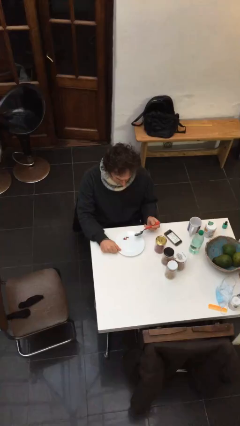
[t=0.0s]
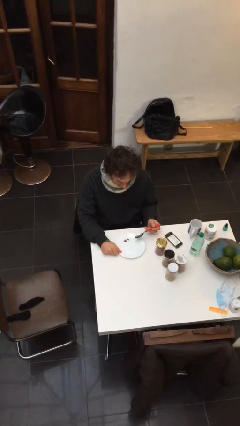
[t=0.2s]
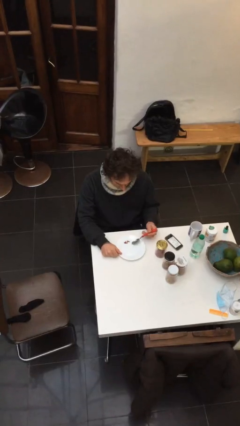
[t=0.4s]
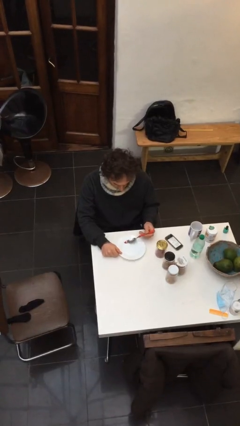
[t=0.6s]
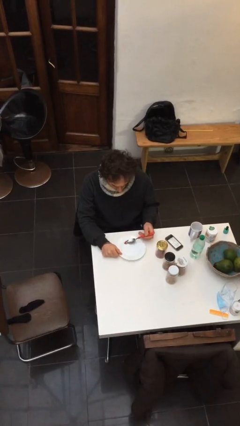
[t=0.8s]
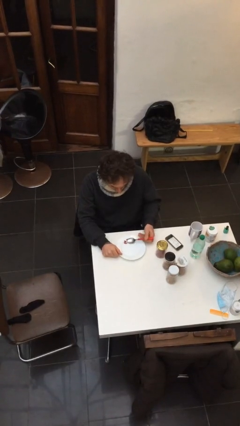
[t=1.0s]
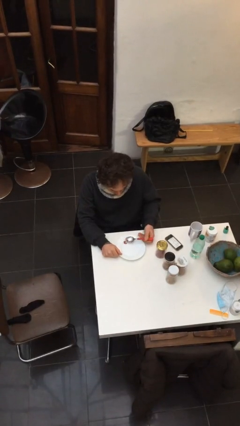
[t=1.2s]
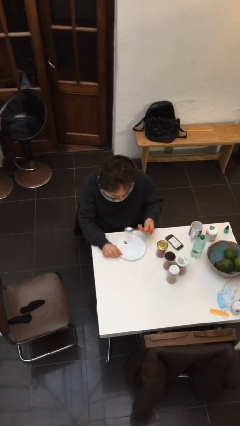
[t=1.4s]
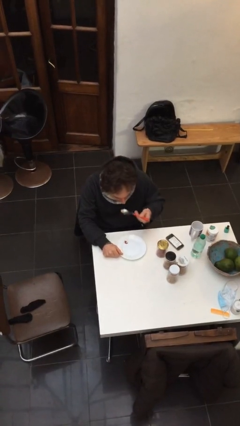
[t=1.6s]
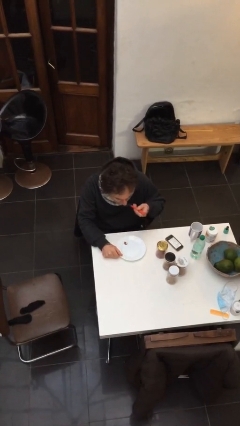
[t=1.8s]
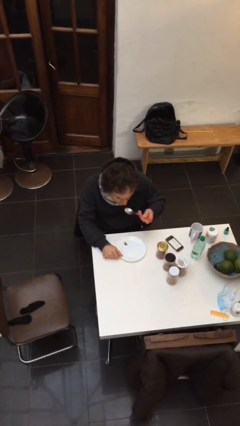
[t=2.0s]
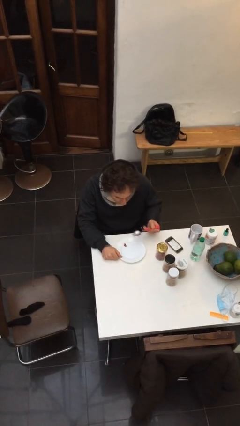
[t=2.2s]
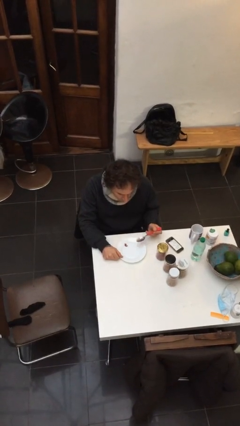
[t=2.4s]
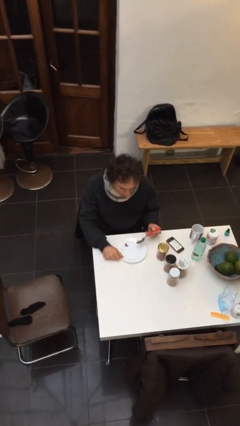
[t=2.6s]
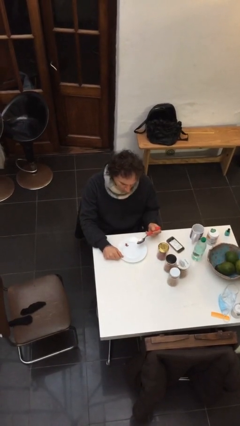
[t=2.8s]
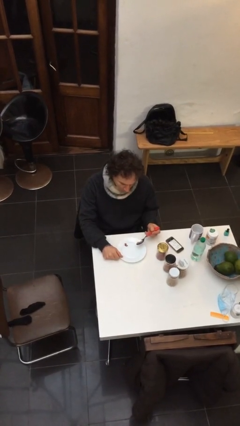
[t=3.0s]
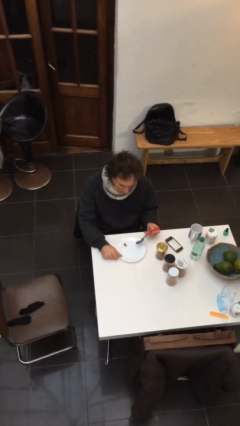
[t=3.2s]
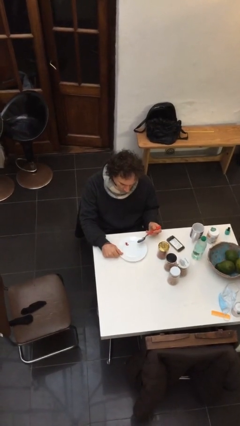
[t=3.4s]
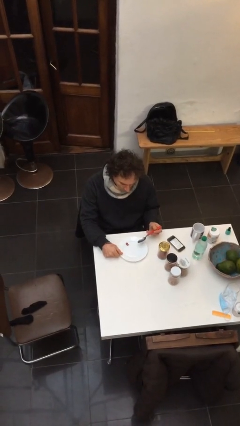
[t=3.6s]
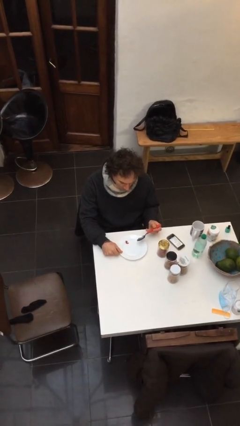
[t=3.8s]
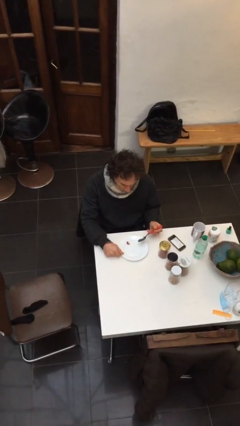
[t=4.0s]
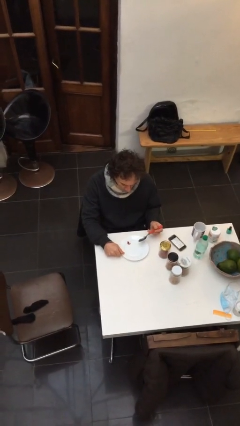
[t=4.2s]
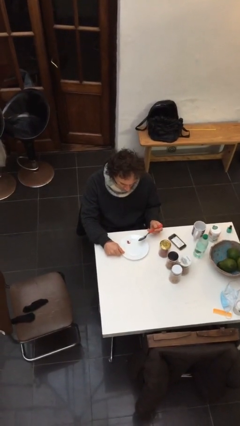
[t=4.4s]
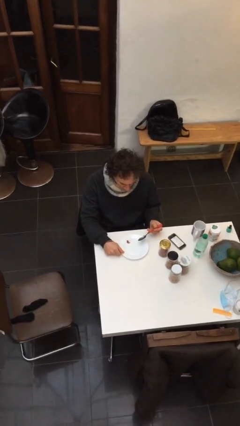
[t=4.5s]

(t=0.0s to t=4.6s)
person eats with utensil

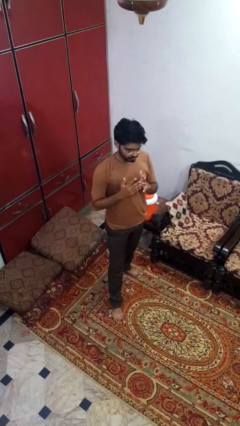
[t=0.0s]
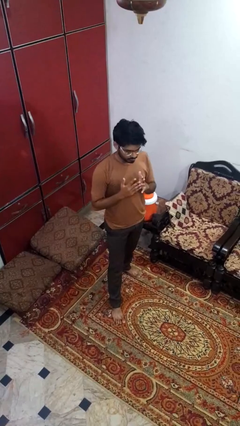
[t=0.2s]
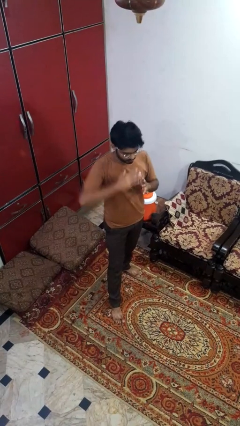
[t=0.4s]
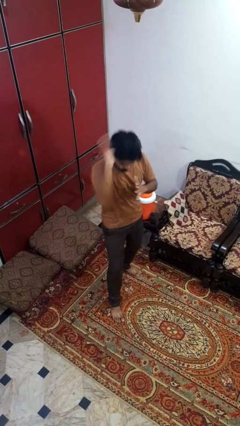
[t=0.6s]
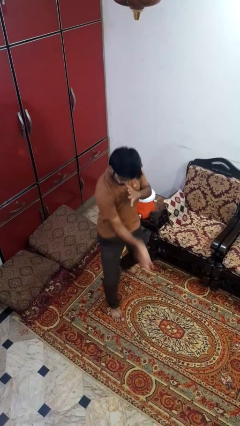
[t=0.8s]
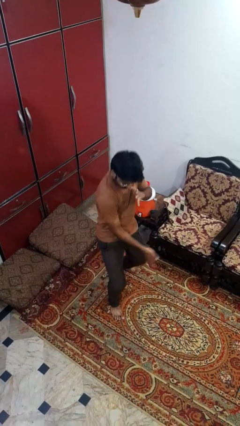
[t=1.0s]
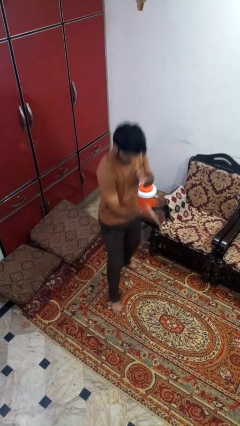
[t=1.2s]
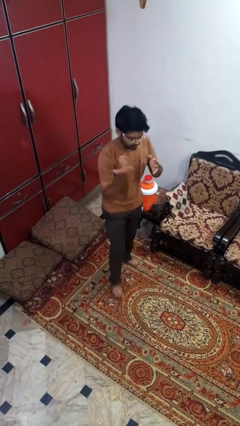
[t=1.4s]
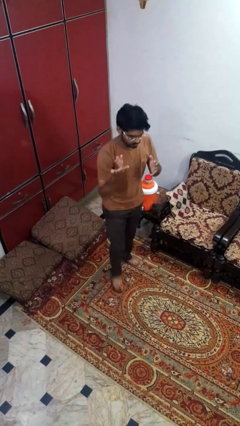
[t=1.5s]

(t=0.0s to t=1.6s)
person karate chop

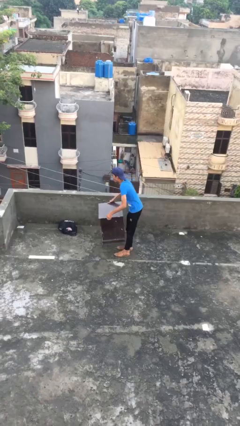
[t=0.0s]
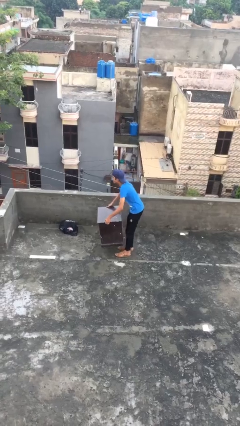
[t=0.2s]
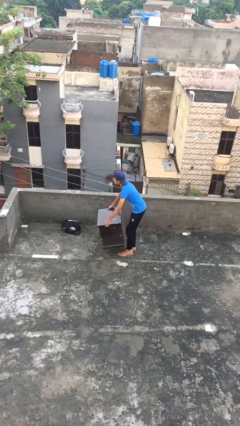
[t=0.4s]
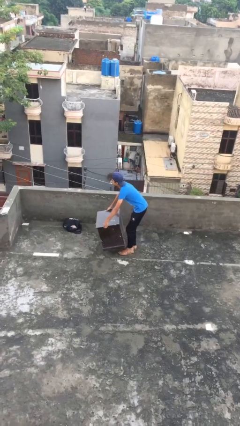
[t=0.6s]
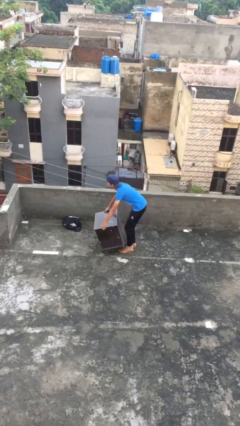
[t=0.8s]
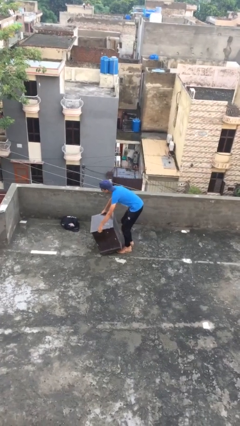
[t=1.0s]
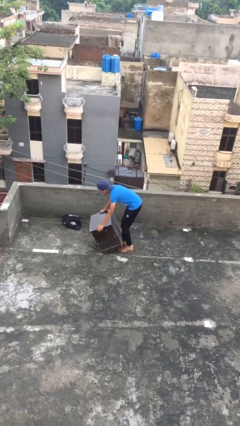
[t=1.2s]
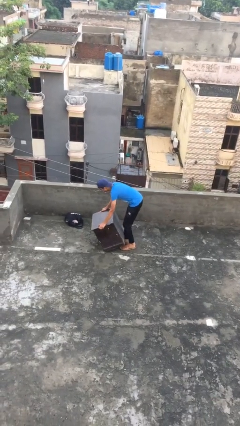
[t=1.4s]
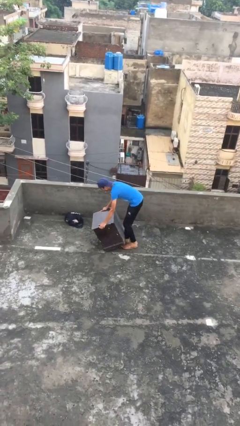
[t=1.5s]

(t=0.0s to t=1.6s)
person puts down object on floor

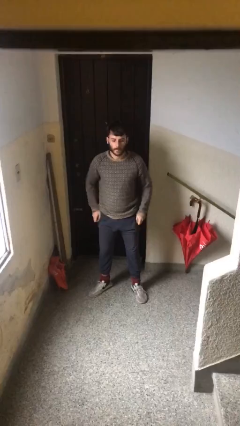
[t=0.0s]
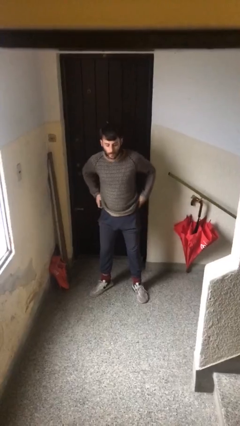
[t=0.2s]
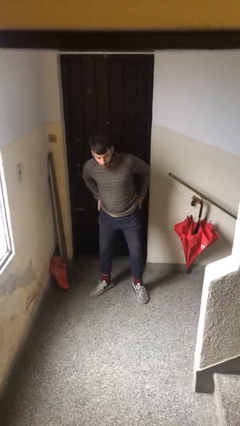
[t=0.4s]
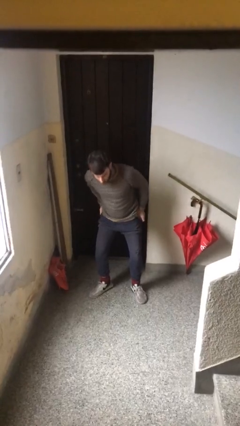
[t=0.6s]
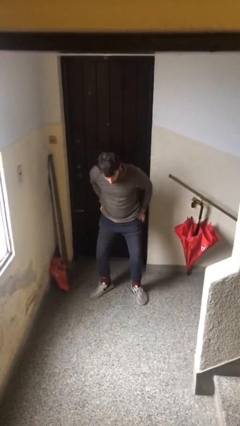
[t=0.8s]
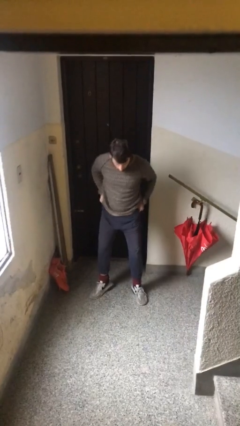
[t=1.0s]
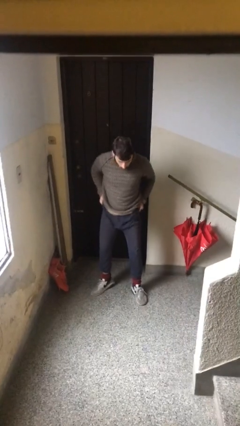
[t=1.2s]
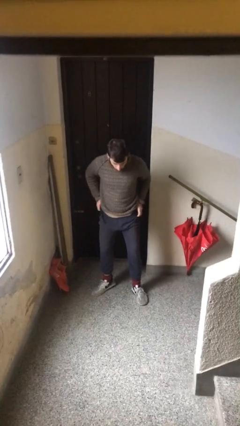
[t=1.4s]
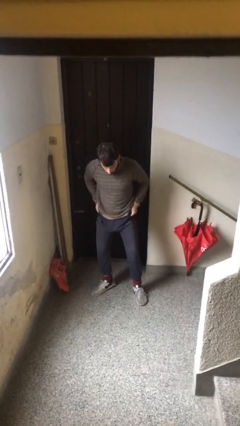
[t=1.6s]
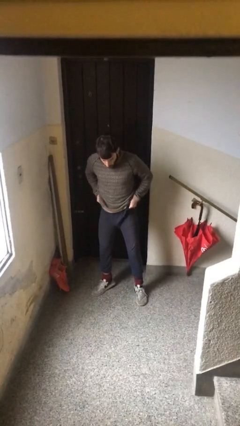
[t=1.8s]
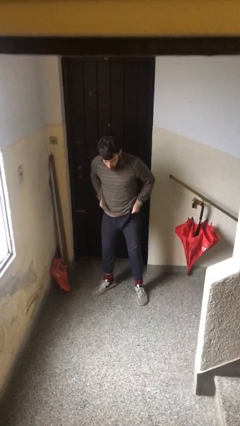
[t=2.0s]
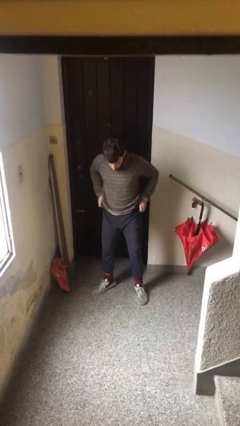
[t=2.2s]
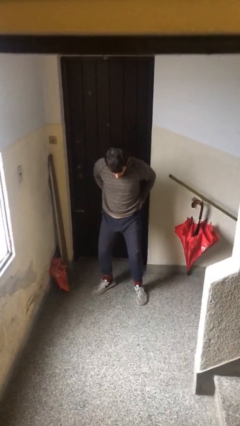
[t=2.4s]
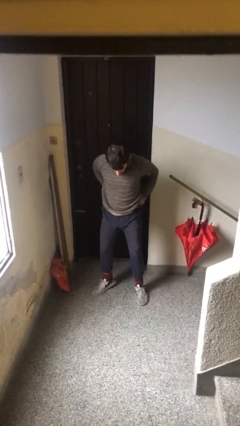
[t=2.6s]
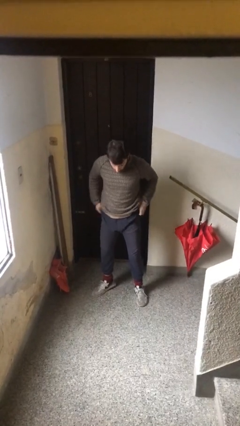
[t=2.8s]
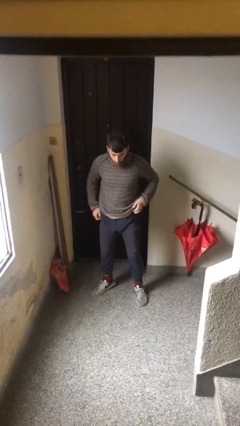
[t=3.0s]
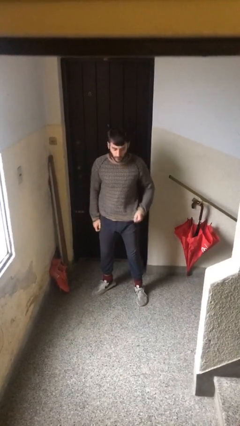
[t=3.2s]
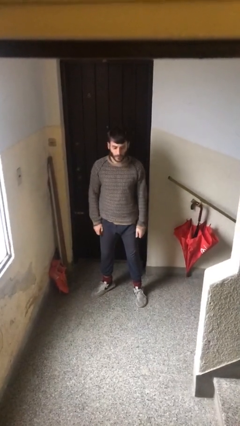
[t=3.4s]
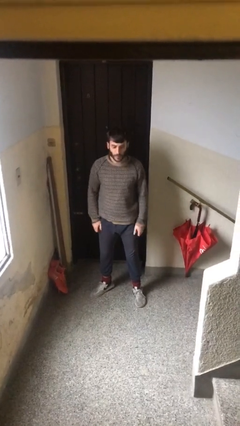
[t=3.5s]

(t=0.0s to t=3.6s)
person hikes up pants

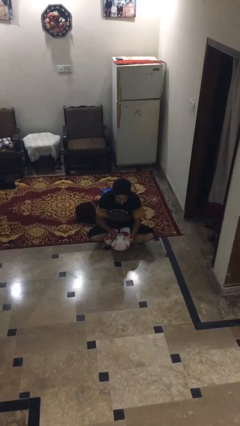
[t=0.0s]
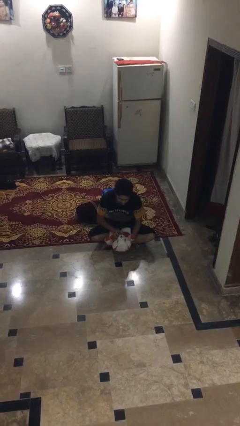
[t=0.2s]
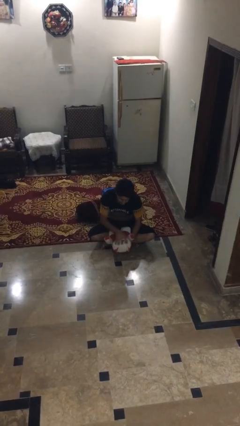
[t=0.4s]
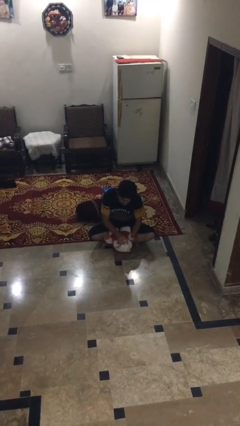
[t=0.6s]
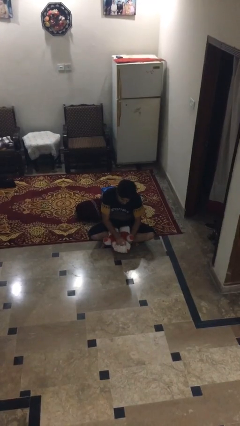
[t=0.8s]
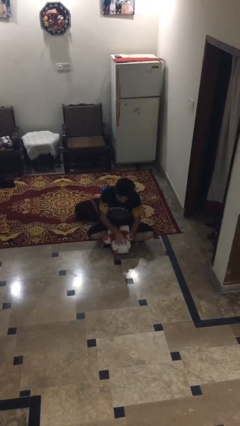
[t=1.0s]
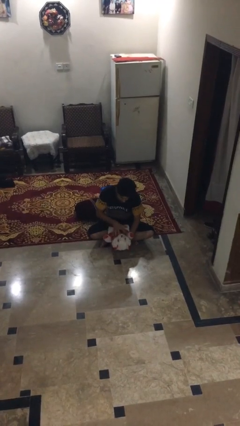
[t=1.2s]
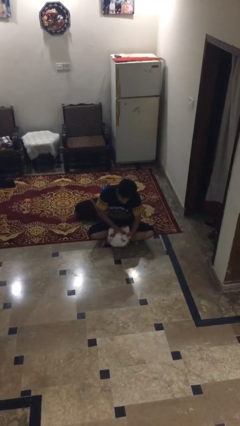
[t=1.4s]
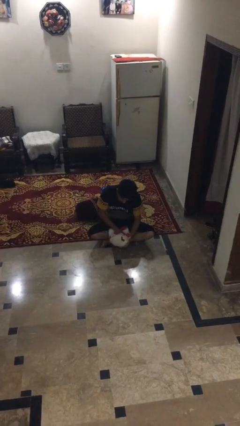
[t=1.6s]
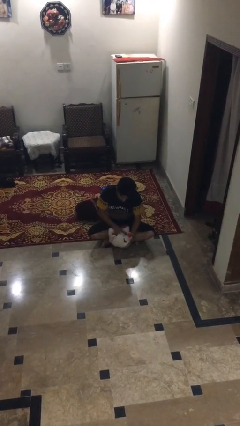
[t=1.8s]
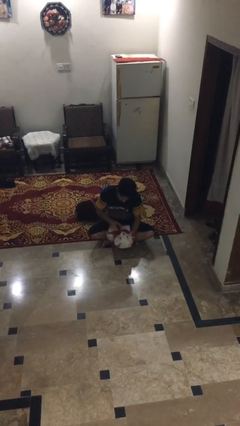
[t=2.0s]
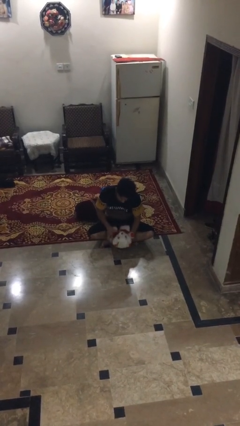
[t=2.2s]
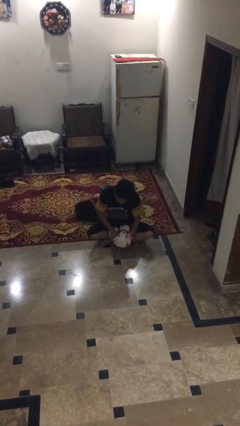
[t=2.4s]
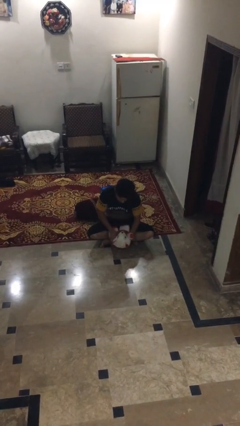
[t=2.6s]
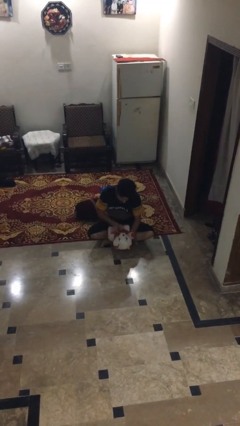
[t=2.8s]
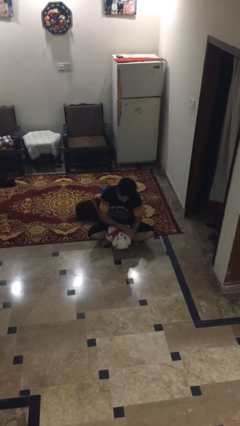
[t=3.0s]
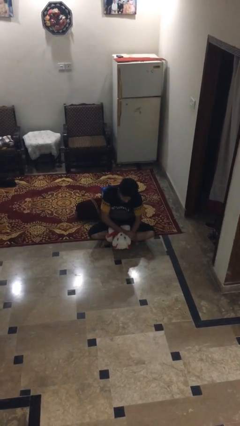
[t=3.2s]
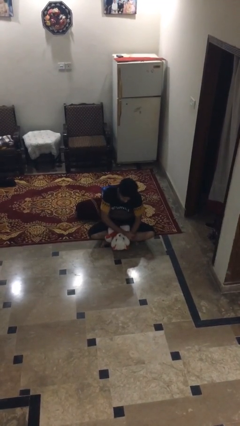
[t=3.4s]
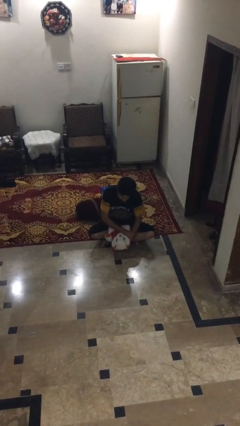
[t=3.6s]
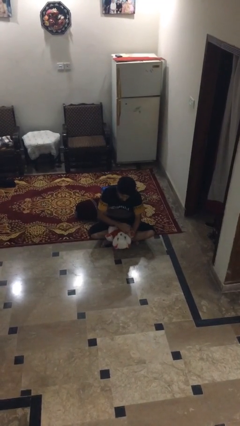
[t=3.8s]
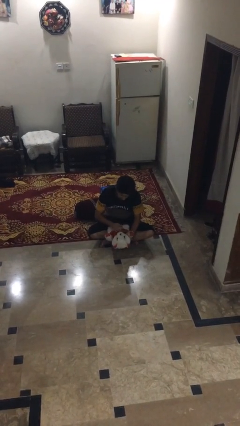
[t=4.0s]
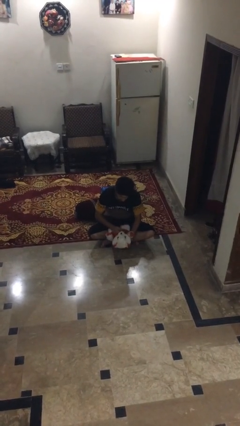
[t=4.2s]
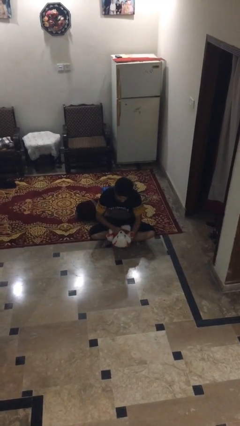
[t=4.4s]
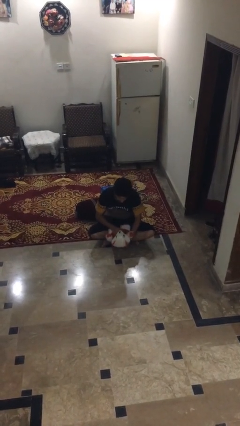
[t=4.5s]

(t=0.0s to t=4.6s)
person squeezes object

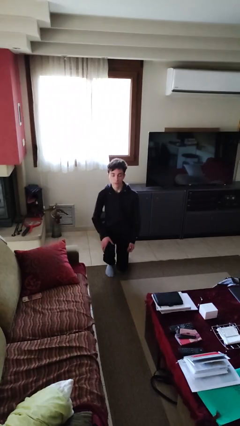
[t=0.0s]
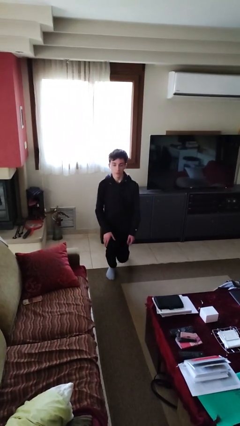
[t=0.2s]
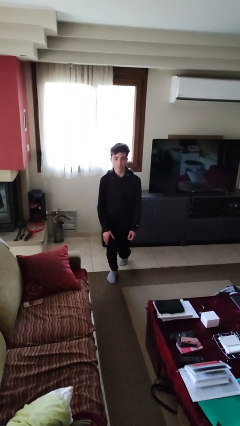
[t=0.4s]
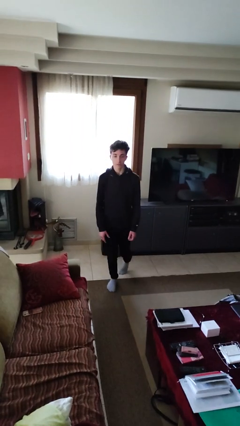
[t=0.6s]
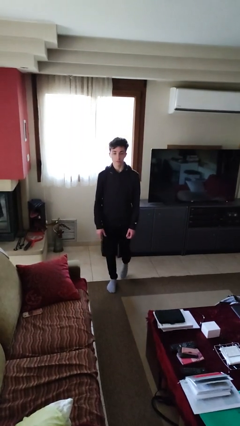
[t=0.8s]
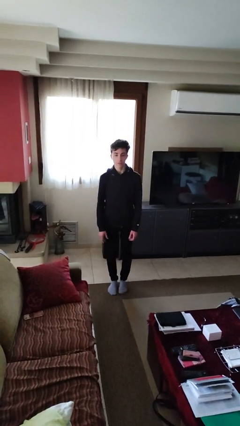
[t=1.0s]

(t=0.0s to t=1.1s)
person stands up from floor

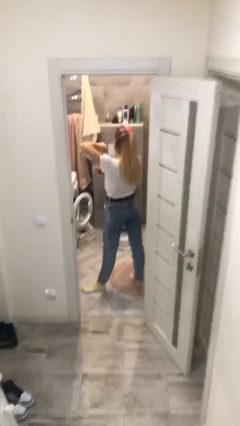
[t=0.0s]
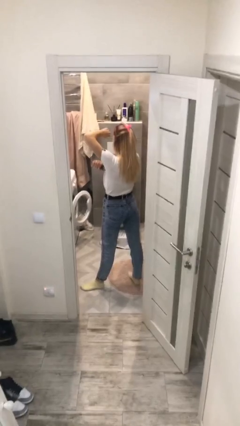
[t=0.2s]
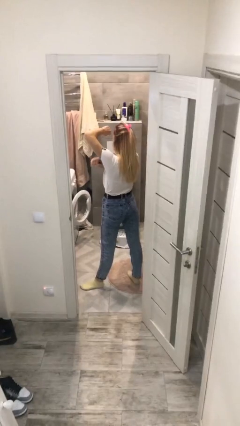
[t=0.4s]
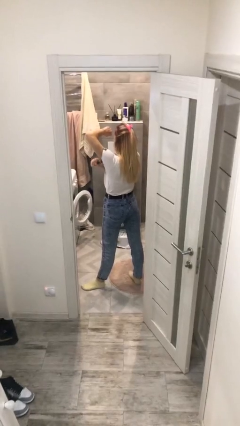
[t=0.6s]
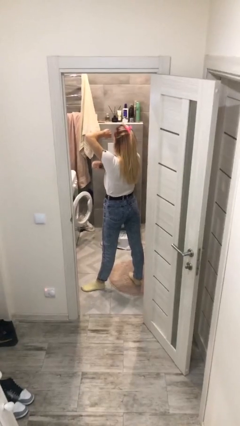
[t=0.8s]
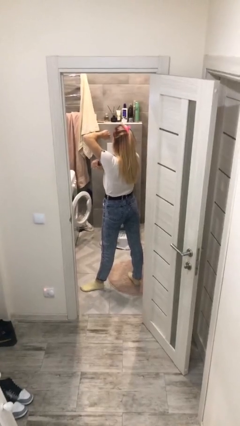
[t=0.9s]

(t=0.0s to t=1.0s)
person applies deodorant
